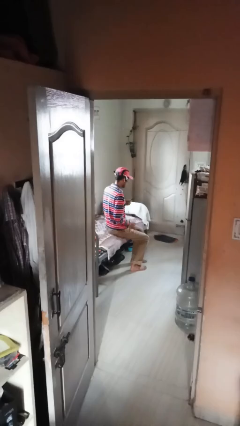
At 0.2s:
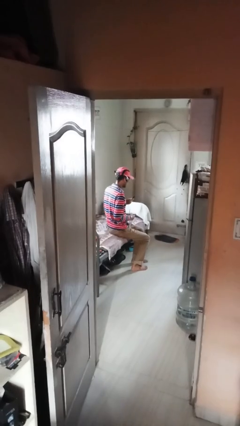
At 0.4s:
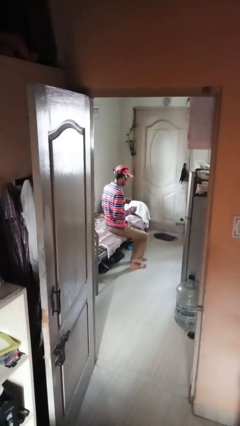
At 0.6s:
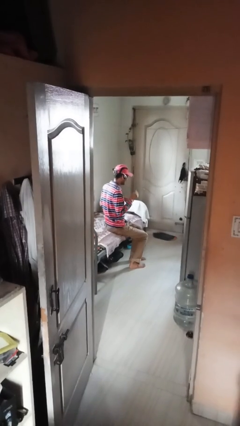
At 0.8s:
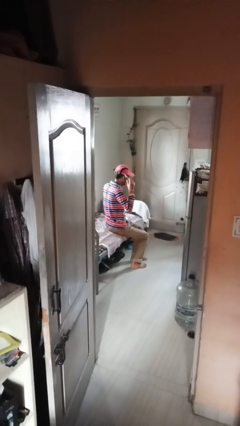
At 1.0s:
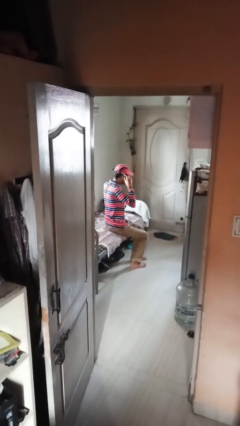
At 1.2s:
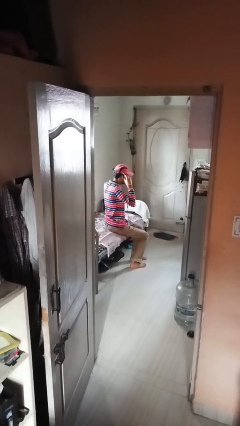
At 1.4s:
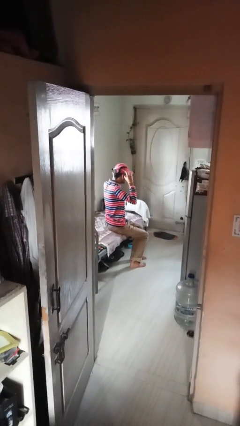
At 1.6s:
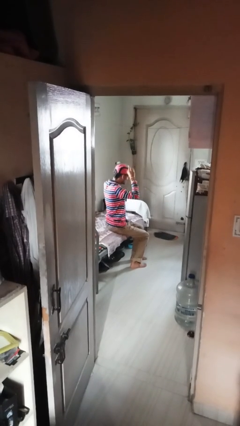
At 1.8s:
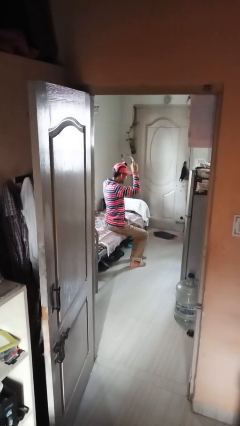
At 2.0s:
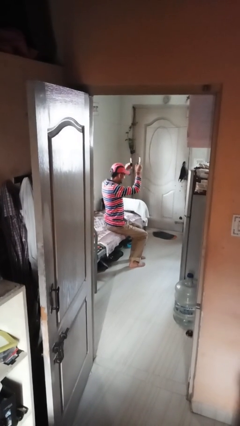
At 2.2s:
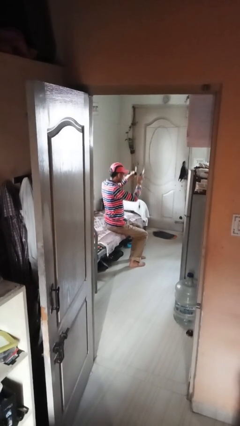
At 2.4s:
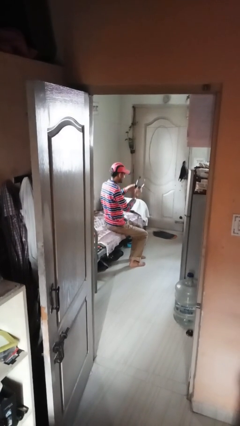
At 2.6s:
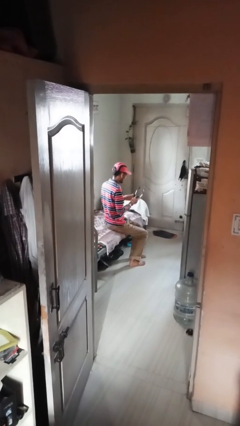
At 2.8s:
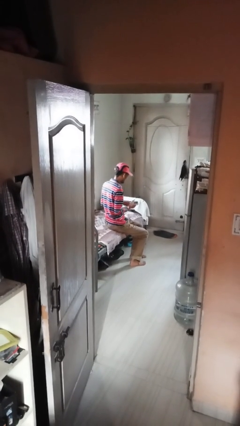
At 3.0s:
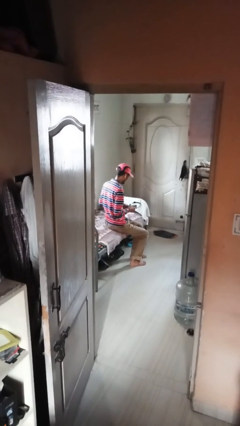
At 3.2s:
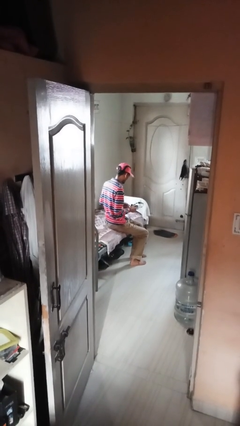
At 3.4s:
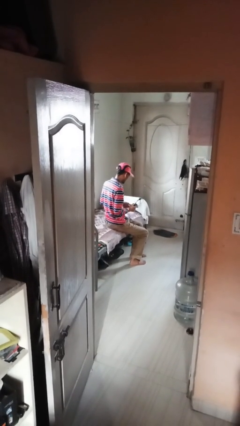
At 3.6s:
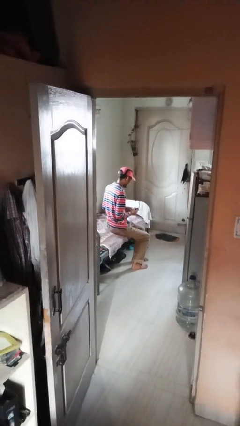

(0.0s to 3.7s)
person takes off headphones

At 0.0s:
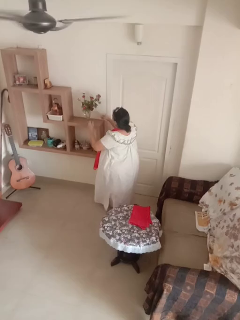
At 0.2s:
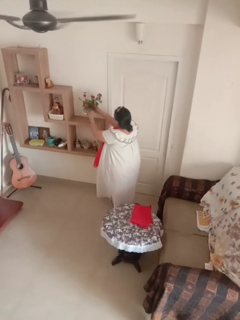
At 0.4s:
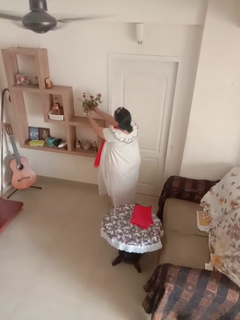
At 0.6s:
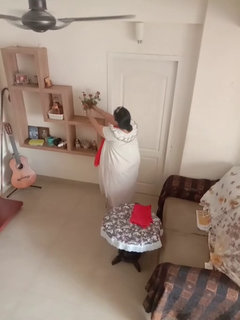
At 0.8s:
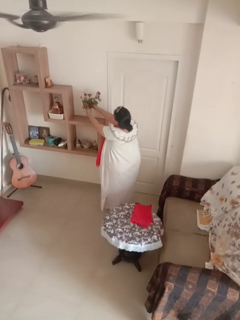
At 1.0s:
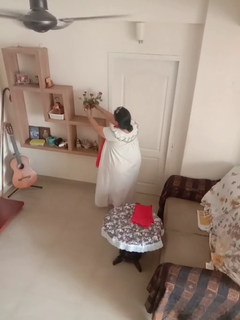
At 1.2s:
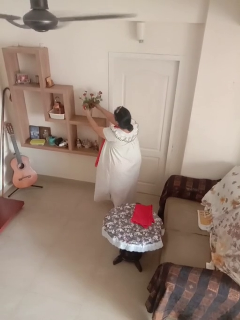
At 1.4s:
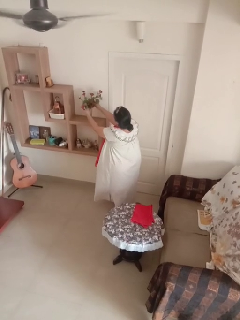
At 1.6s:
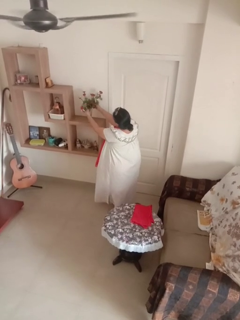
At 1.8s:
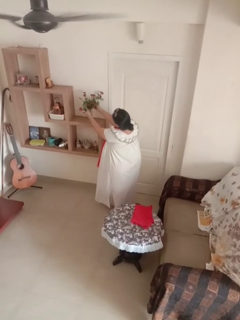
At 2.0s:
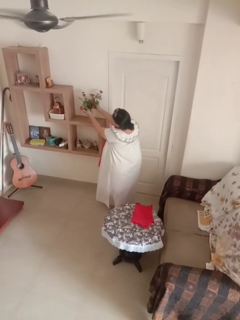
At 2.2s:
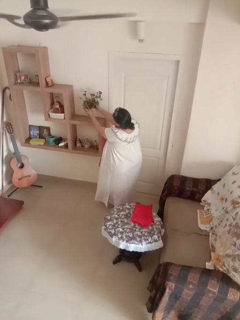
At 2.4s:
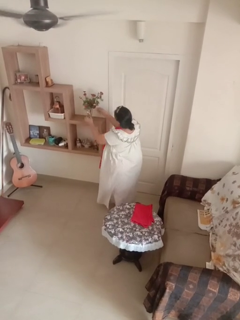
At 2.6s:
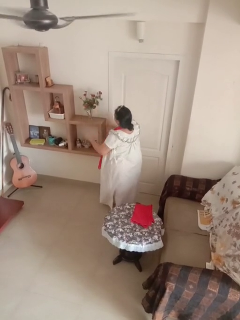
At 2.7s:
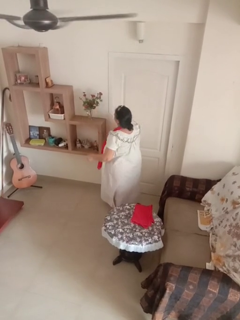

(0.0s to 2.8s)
person arranges flowers in vase

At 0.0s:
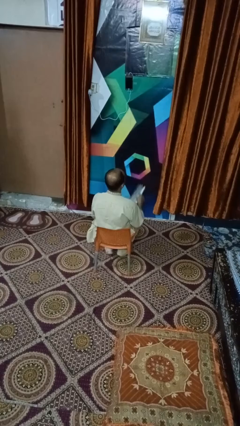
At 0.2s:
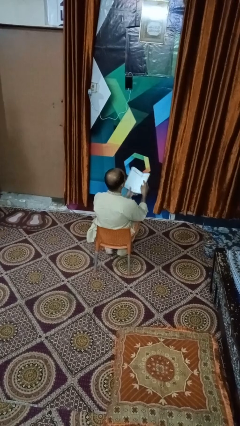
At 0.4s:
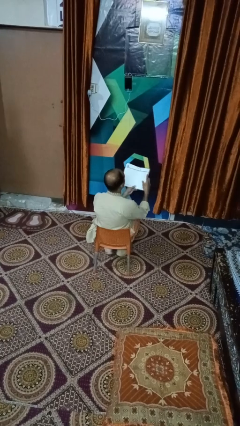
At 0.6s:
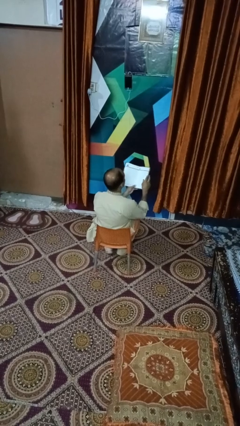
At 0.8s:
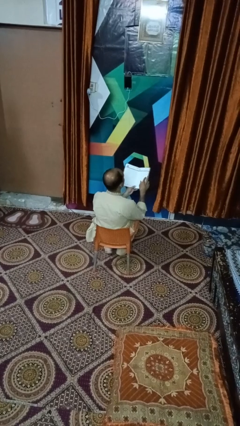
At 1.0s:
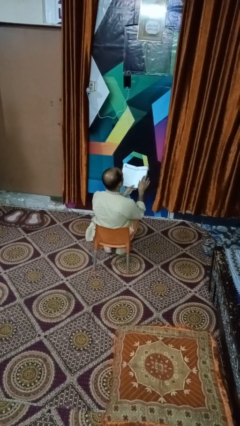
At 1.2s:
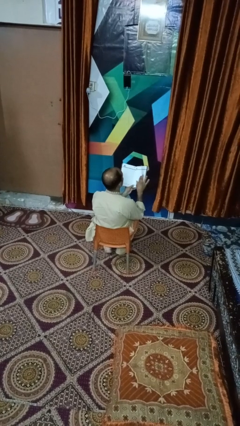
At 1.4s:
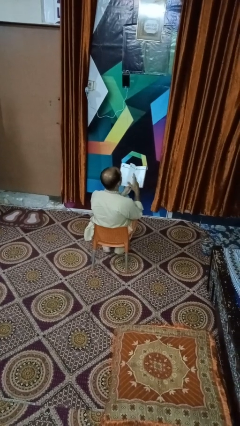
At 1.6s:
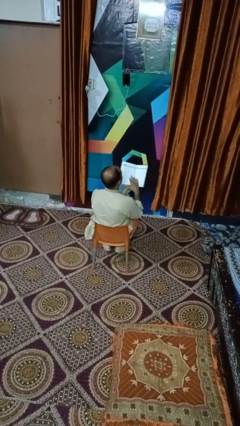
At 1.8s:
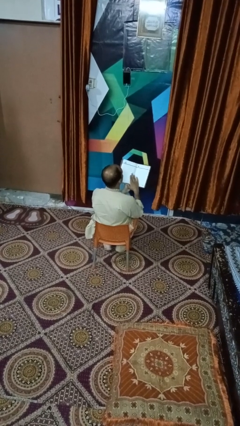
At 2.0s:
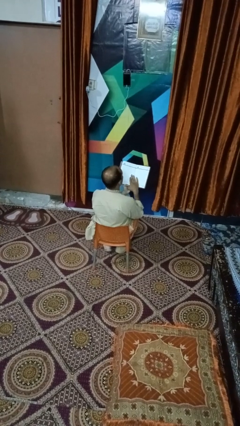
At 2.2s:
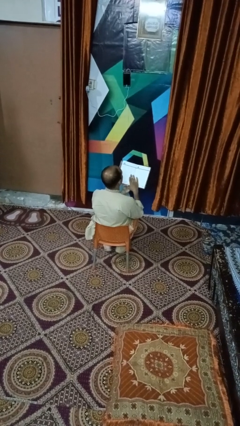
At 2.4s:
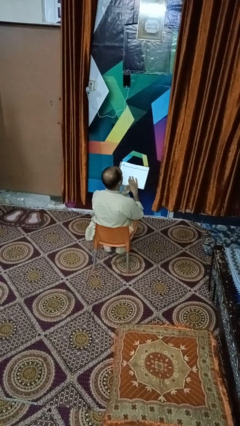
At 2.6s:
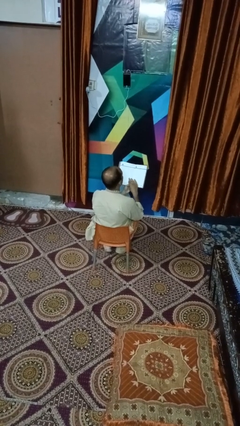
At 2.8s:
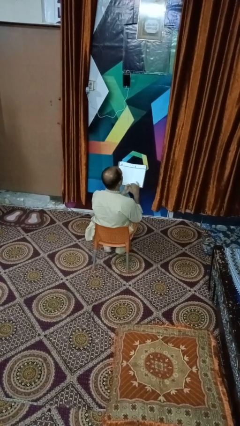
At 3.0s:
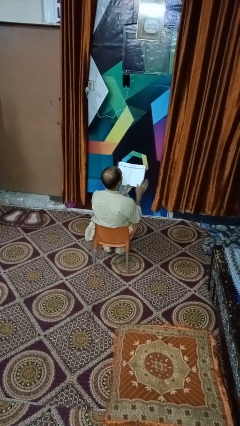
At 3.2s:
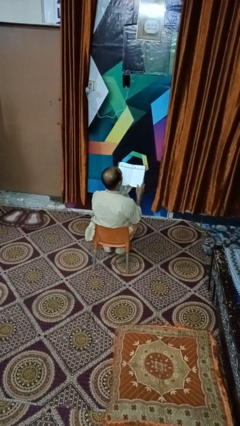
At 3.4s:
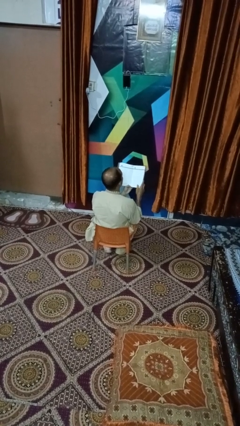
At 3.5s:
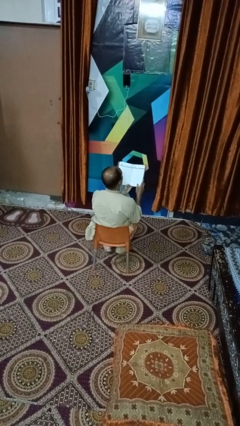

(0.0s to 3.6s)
person reads magazine

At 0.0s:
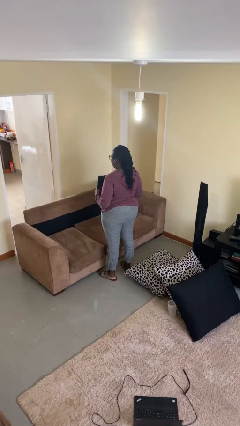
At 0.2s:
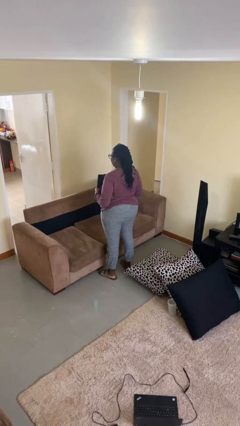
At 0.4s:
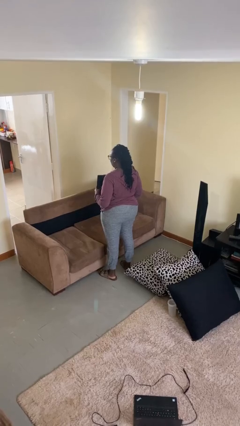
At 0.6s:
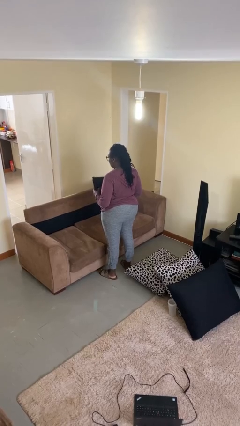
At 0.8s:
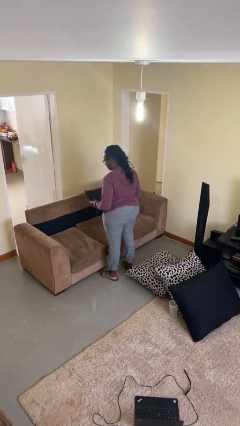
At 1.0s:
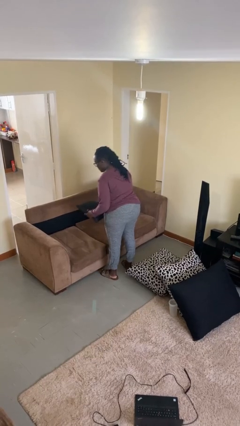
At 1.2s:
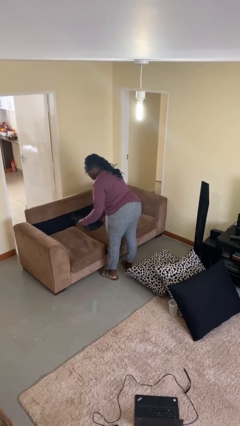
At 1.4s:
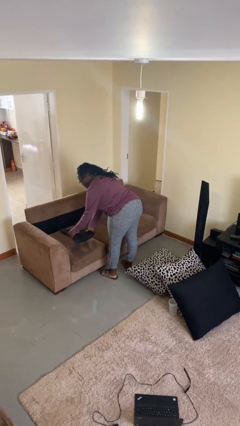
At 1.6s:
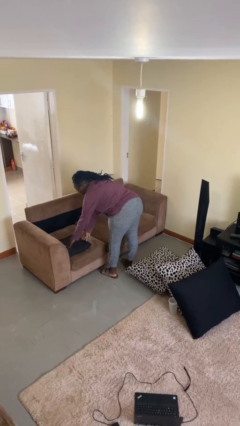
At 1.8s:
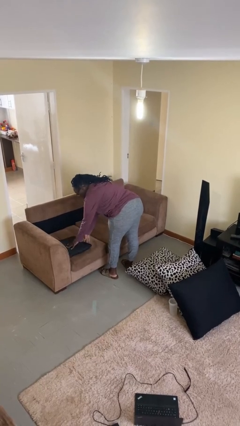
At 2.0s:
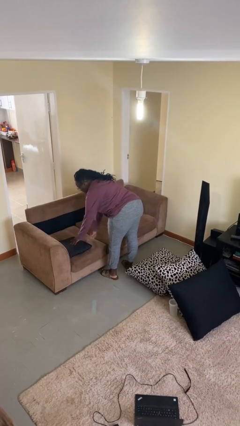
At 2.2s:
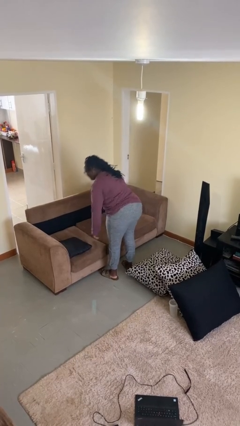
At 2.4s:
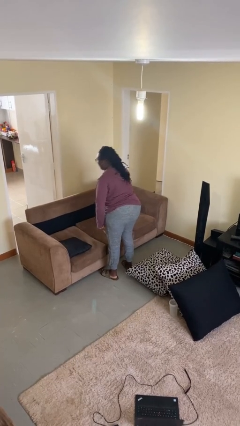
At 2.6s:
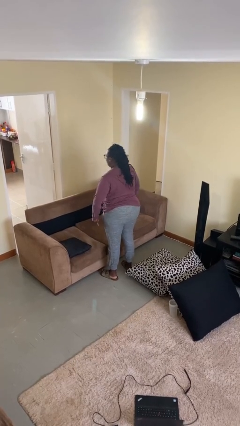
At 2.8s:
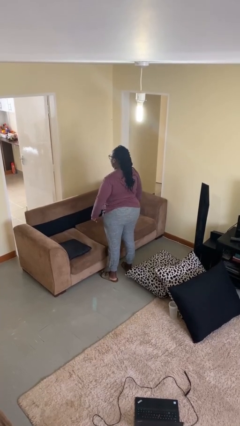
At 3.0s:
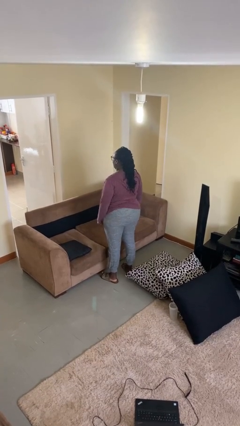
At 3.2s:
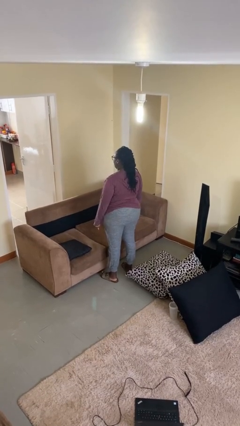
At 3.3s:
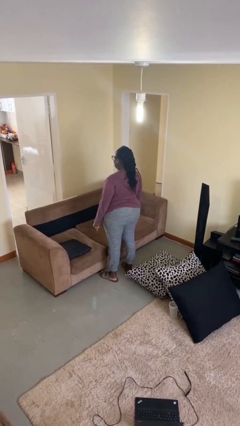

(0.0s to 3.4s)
person puts down object on couch

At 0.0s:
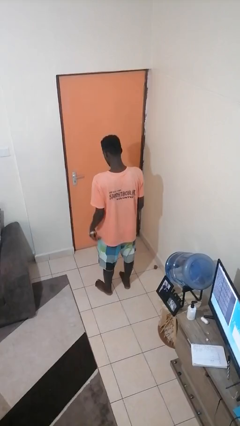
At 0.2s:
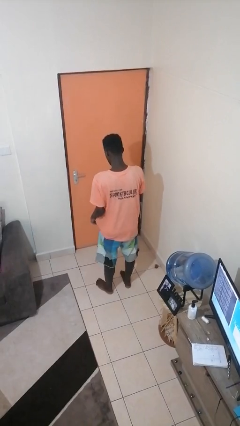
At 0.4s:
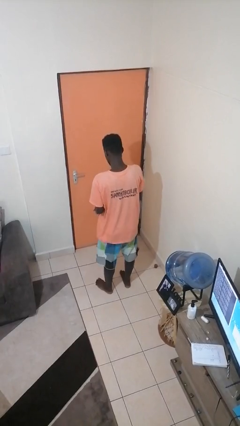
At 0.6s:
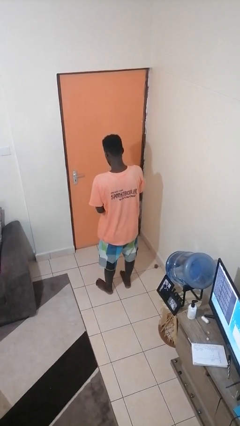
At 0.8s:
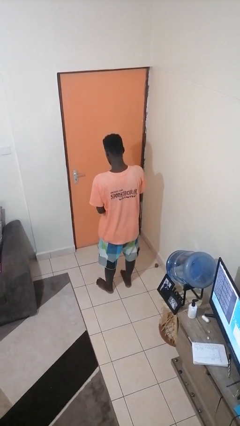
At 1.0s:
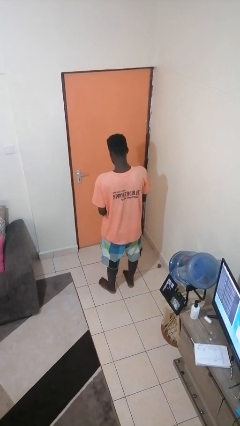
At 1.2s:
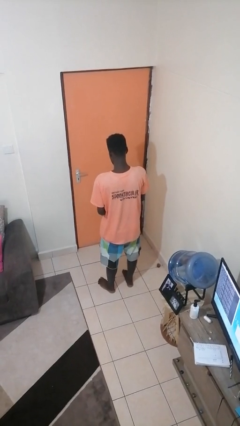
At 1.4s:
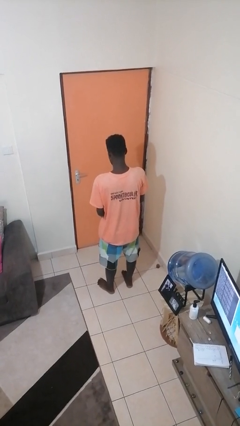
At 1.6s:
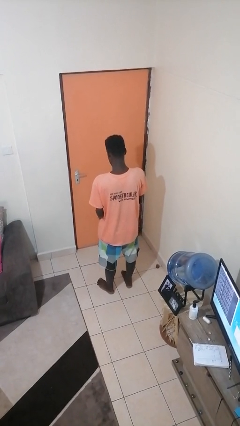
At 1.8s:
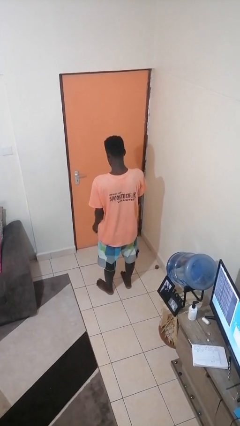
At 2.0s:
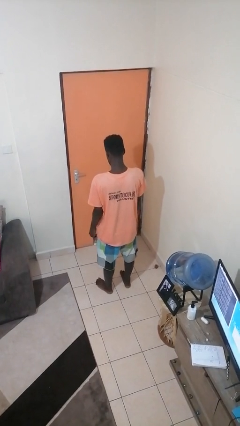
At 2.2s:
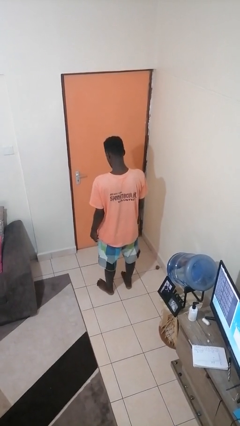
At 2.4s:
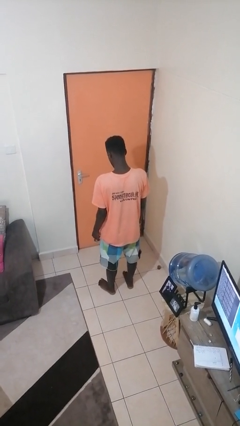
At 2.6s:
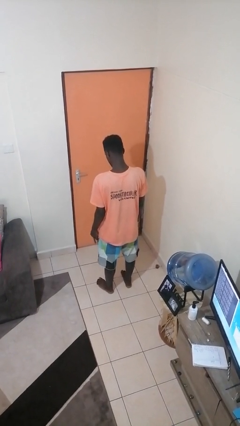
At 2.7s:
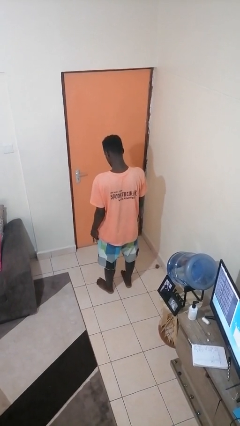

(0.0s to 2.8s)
person takes off wristwatch

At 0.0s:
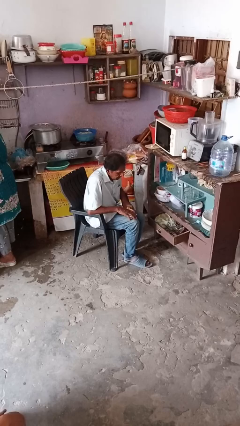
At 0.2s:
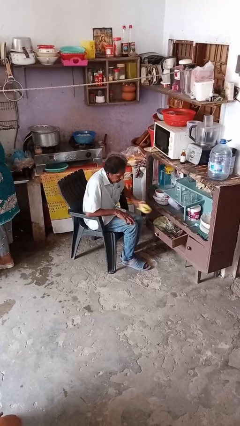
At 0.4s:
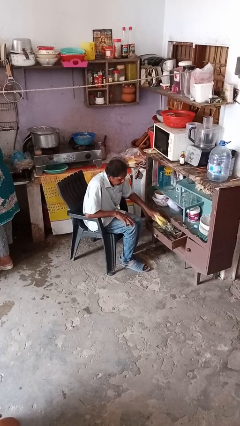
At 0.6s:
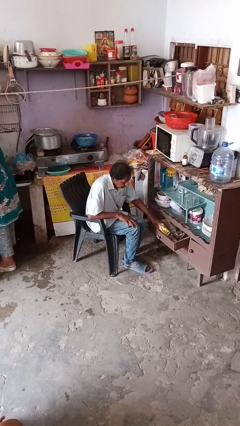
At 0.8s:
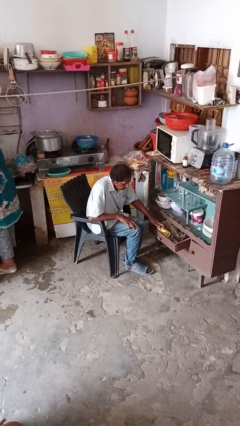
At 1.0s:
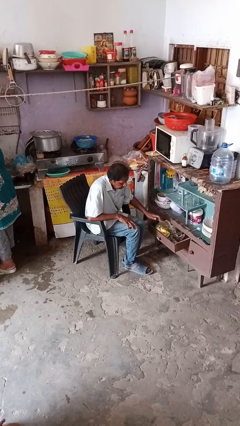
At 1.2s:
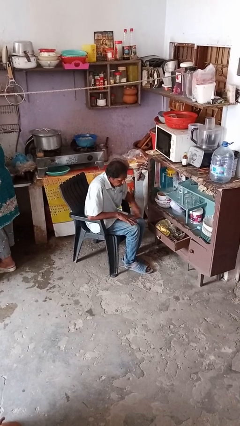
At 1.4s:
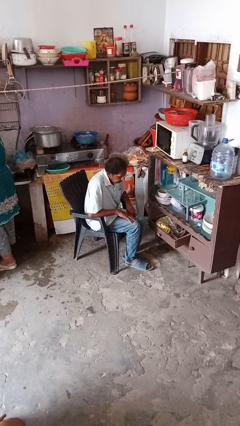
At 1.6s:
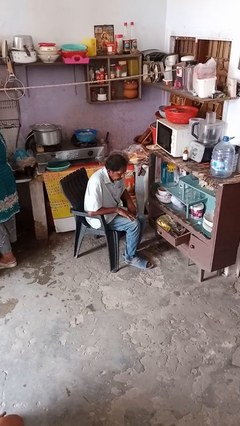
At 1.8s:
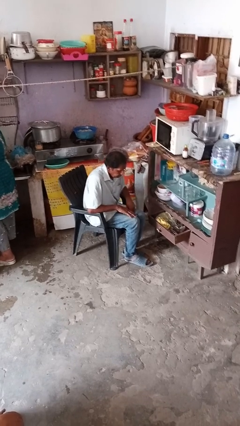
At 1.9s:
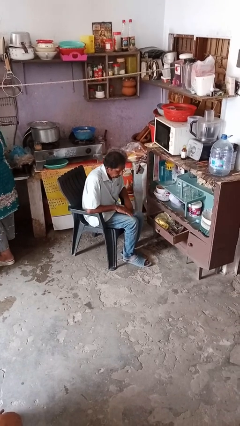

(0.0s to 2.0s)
person puts clothes into dresser
